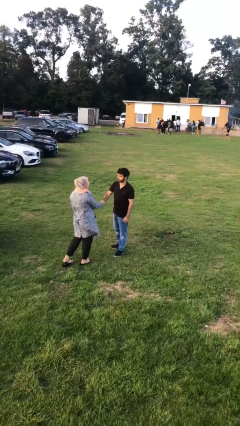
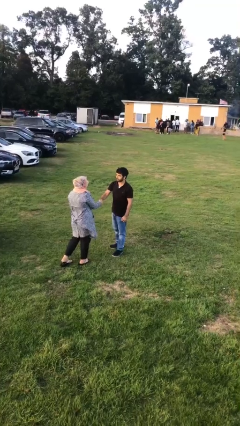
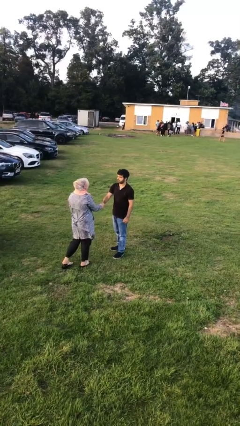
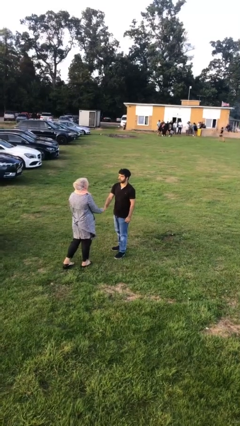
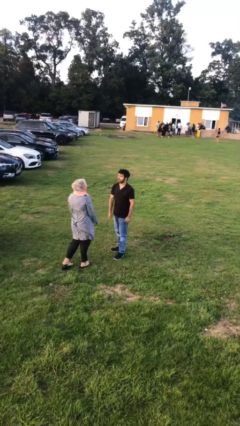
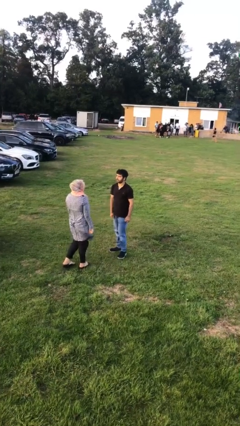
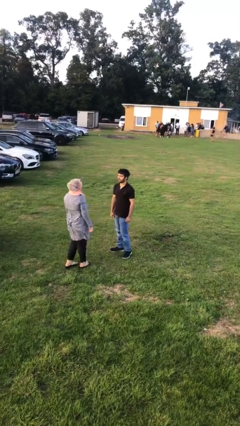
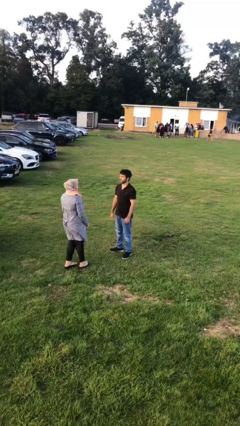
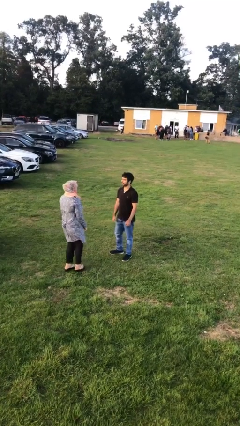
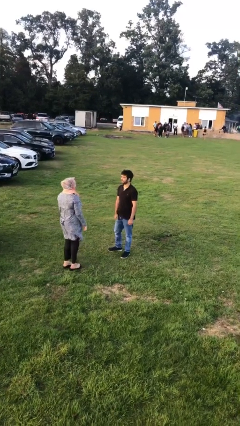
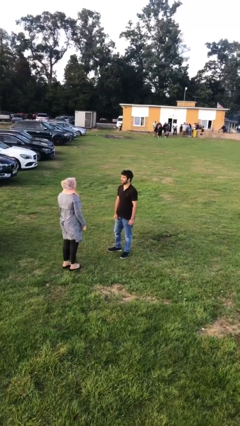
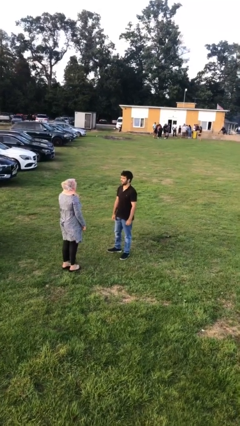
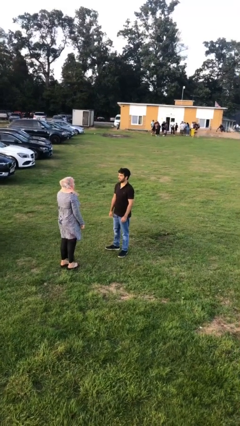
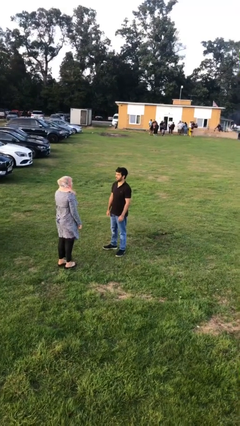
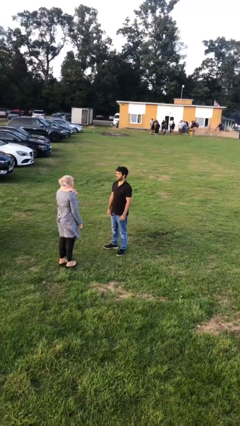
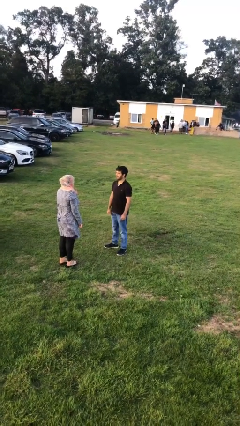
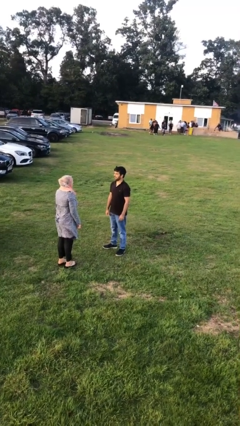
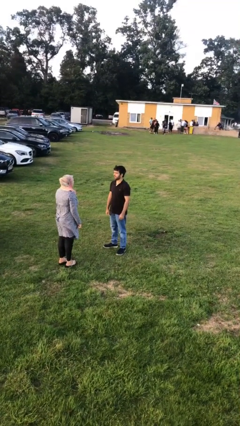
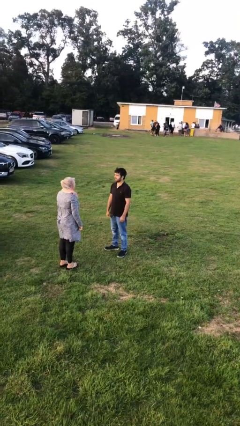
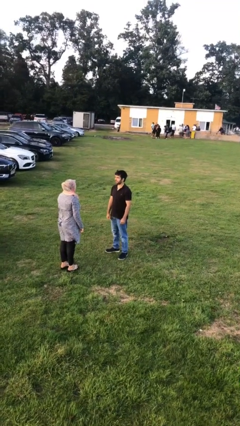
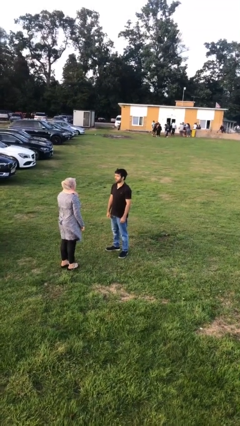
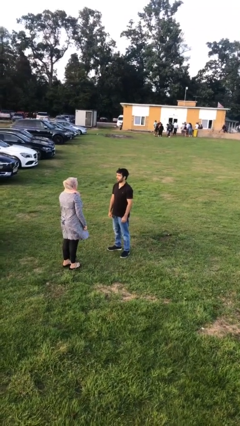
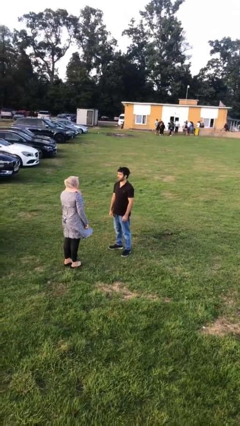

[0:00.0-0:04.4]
person talks to person

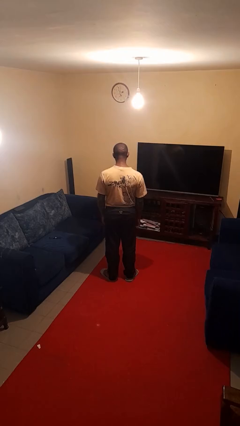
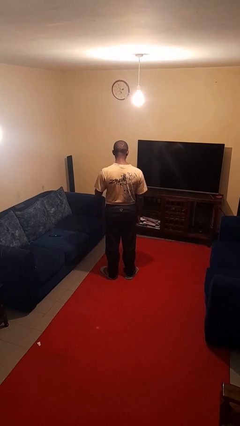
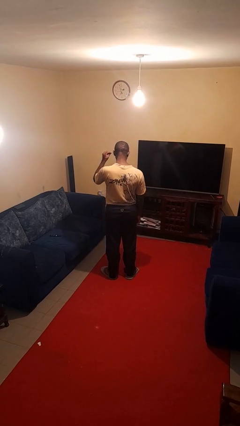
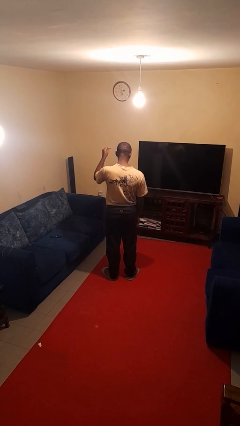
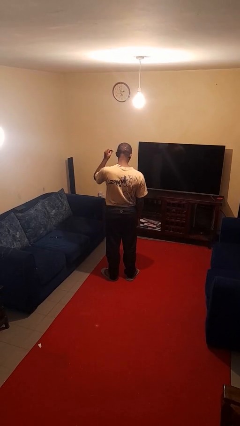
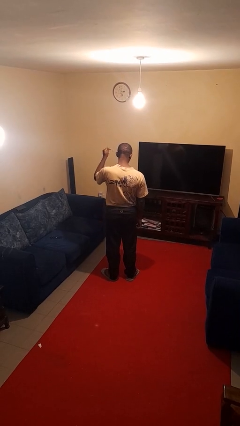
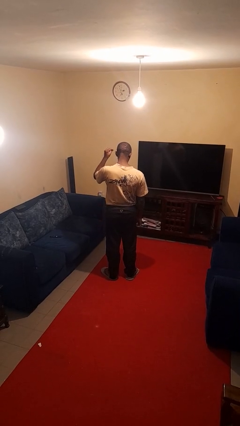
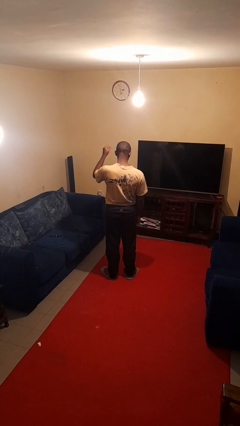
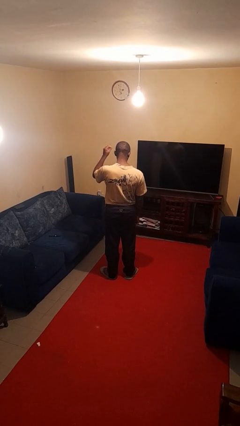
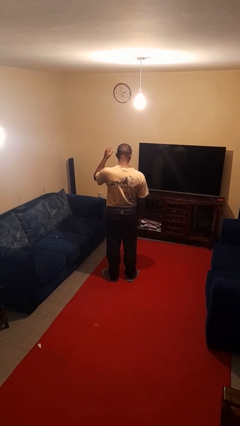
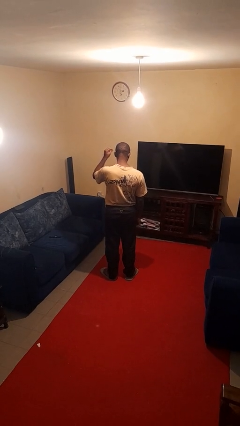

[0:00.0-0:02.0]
person snaps fingers

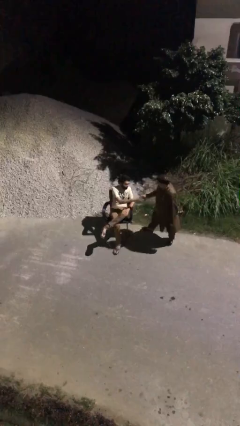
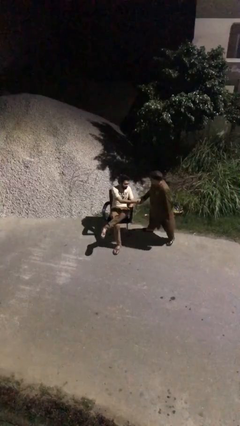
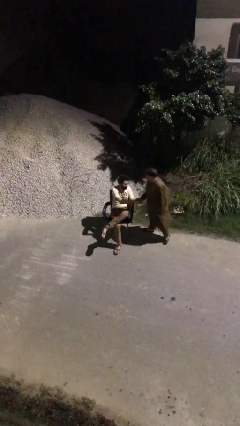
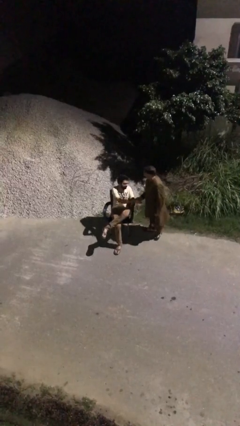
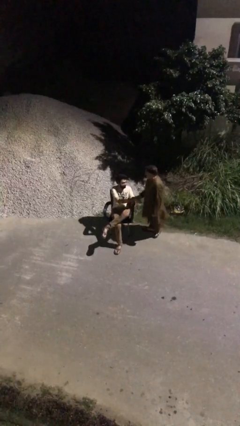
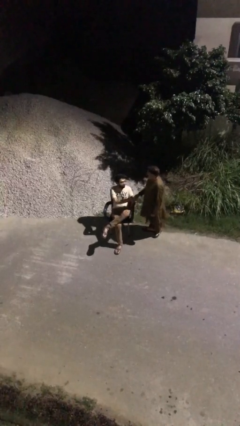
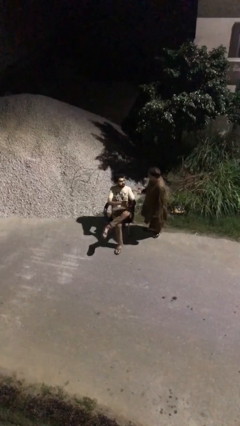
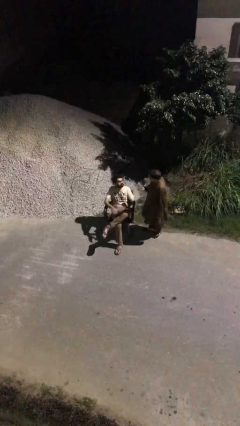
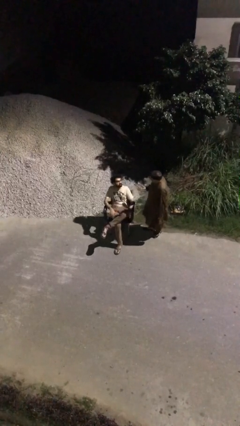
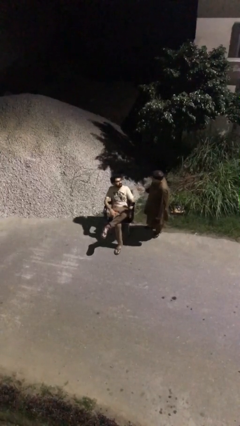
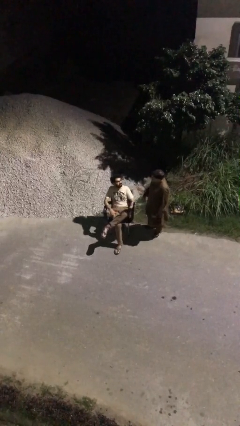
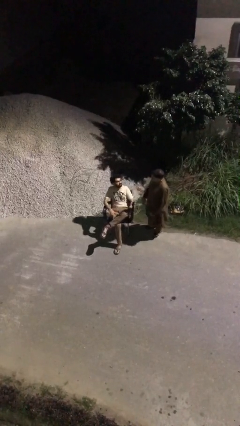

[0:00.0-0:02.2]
person shakes hand

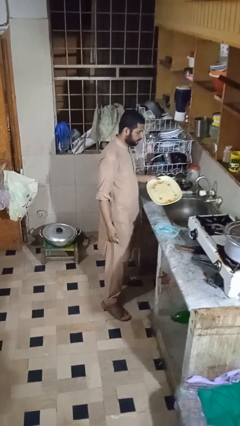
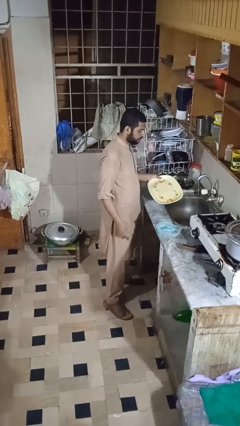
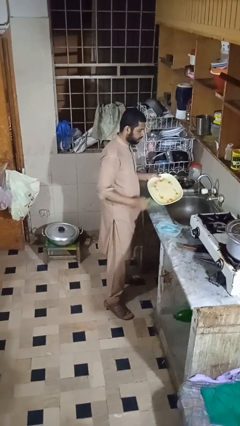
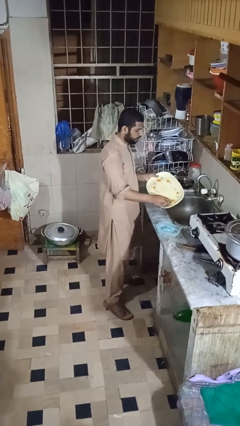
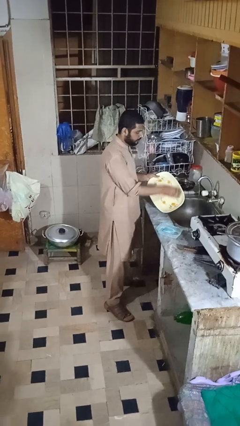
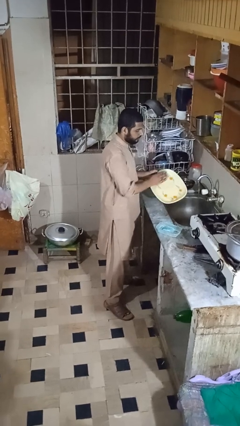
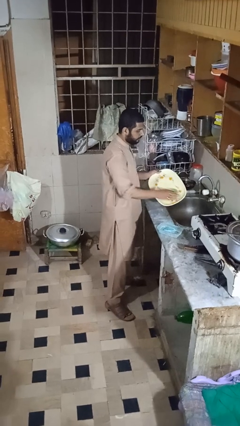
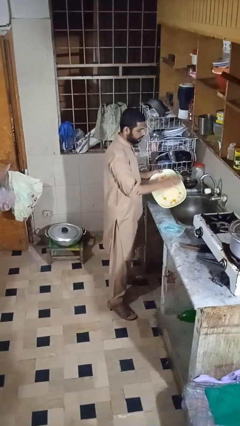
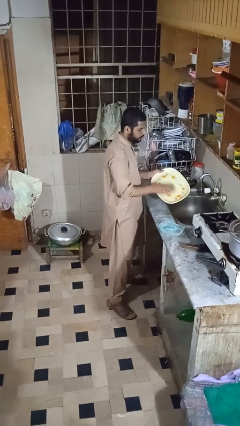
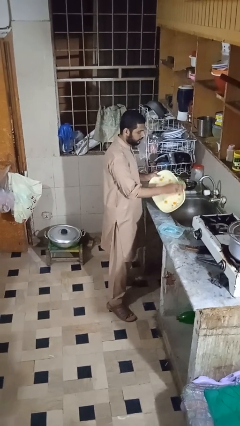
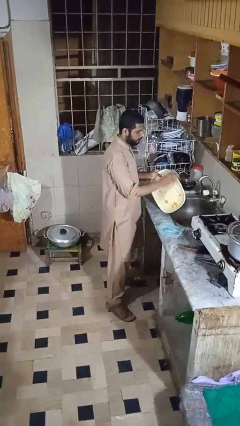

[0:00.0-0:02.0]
person washes dish

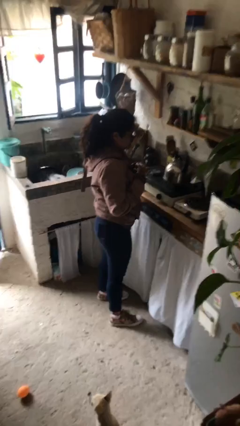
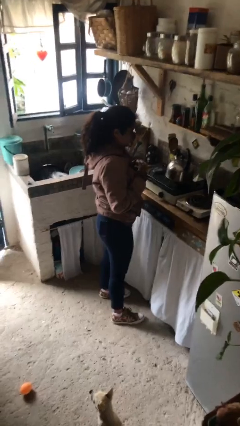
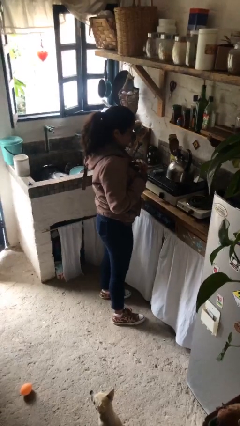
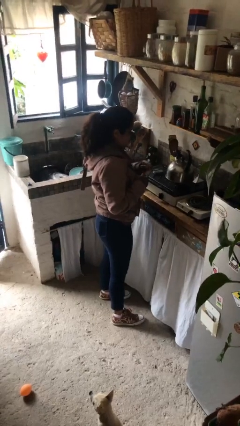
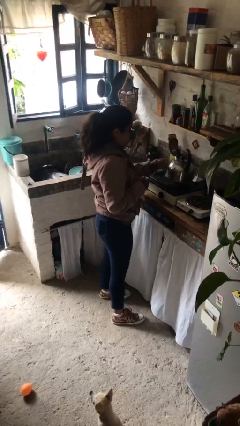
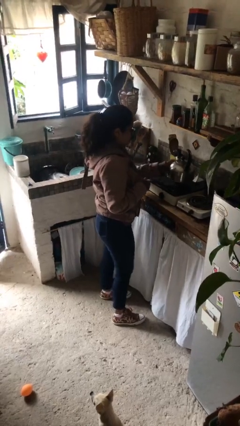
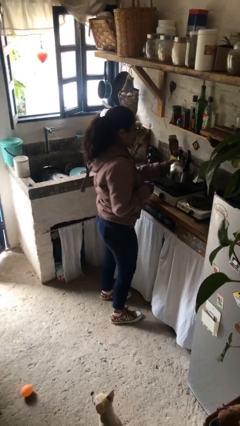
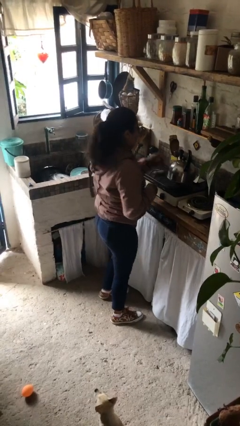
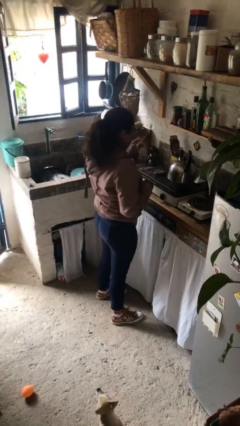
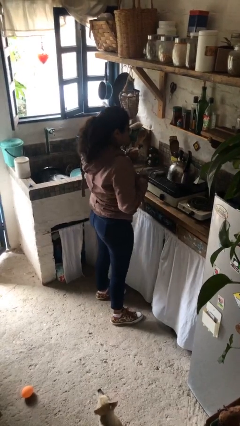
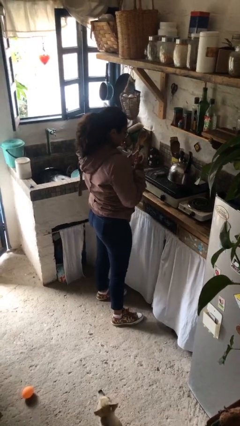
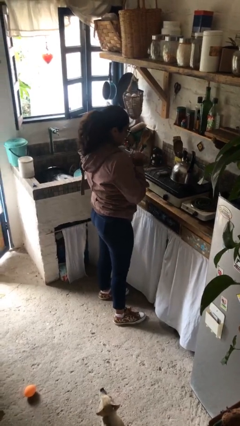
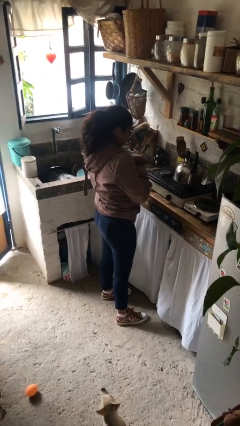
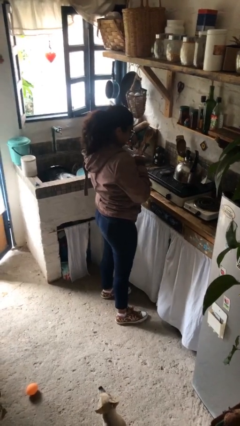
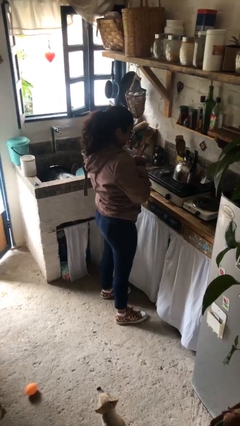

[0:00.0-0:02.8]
person burns hand

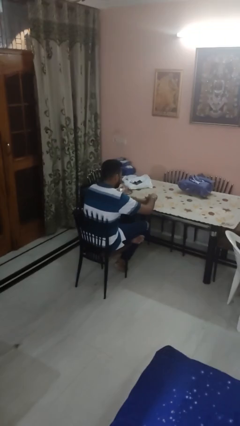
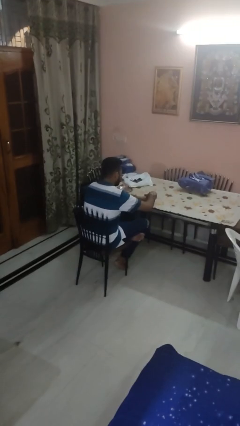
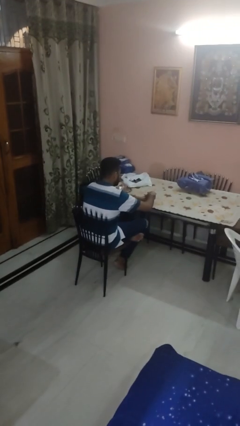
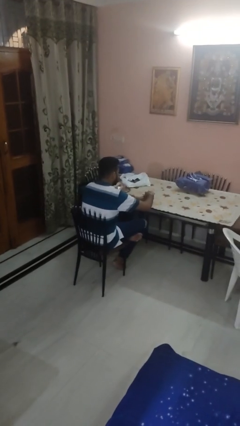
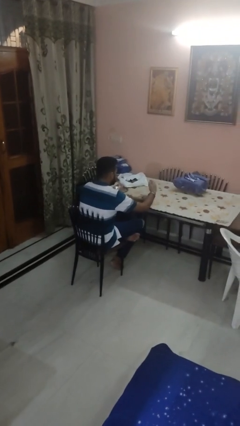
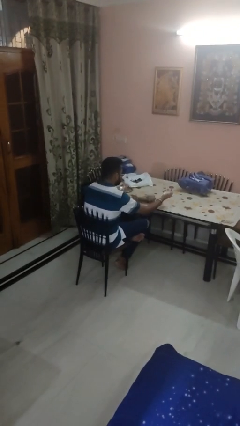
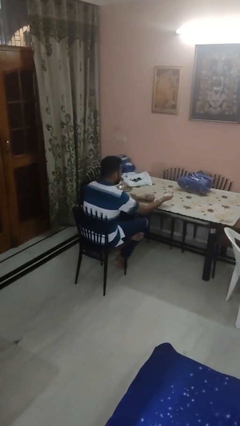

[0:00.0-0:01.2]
person opens jar

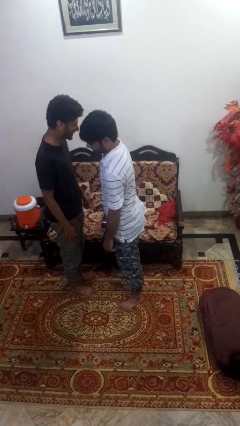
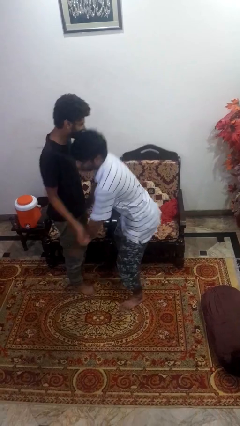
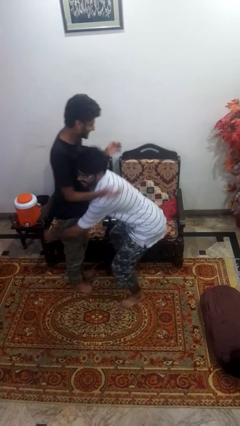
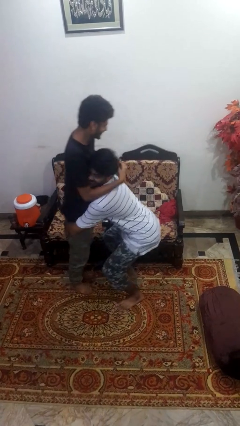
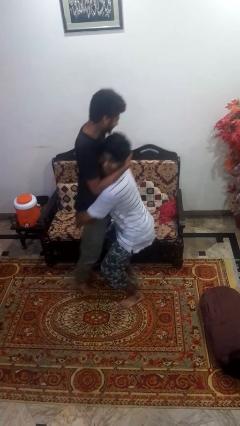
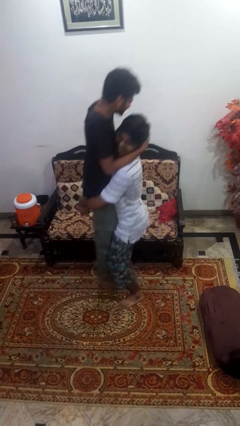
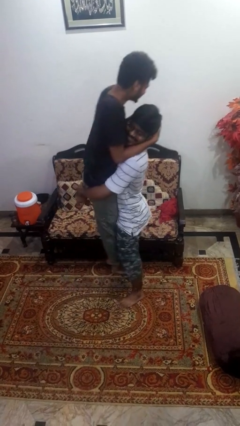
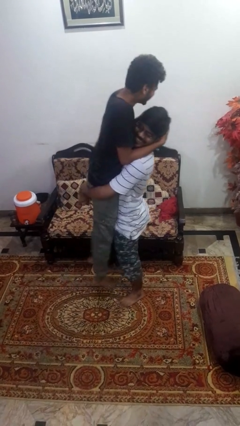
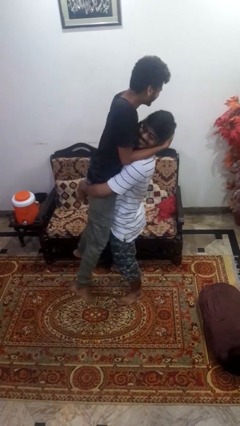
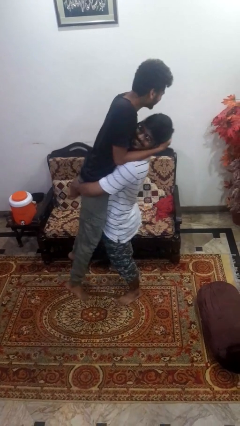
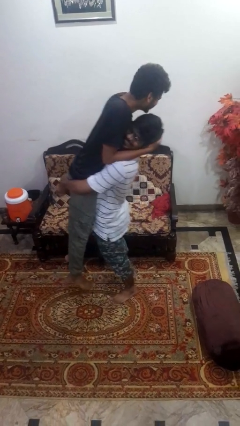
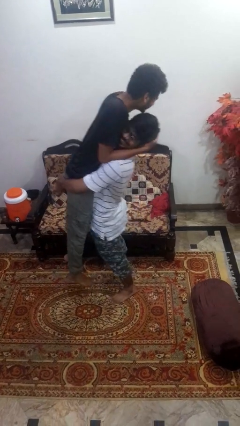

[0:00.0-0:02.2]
person picks up person

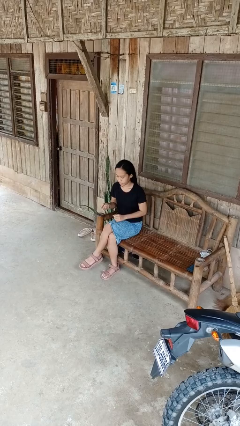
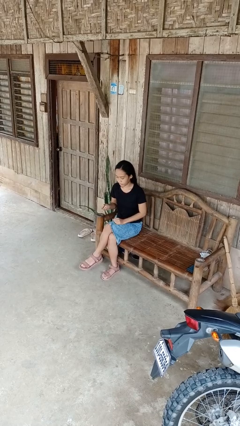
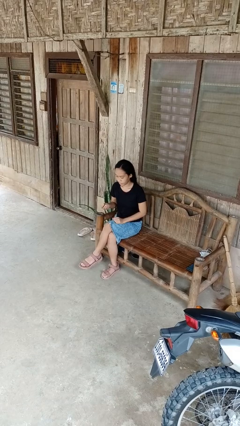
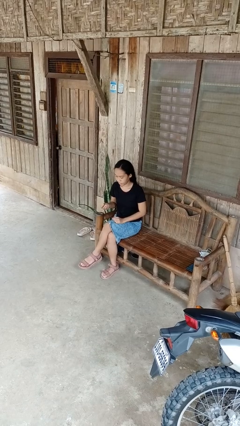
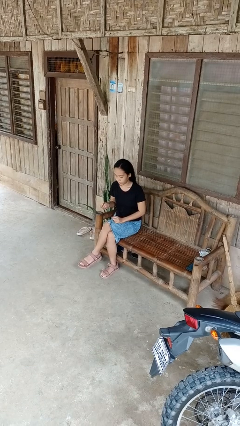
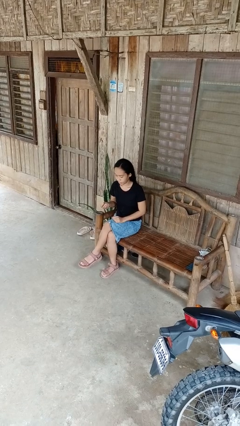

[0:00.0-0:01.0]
person takes off ring
